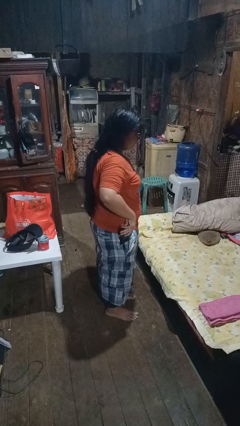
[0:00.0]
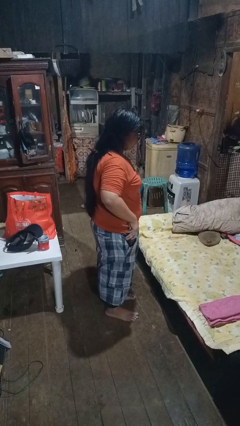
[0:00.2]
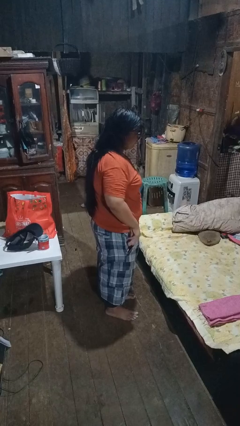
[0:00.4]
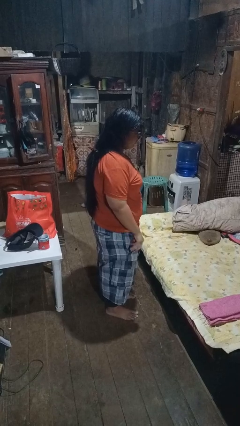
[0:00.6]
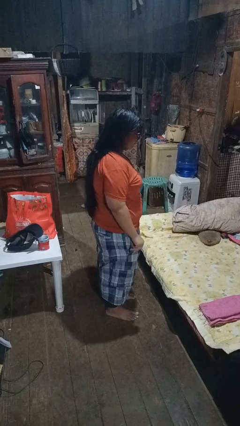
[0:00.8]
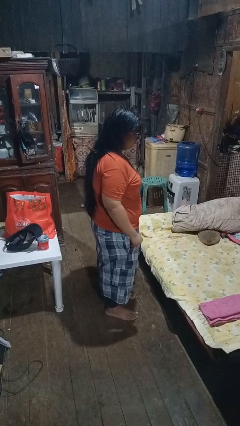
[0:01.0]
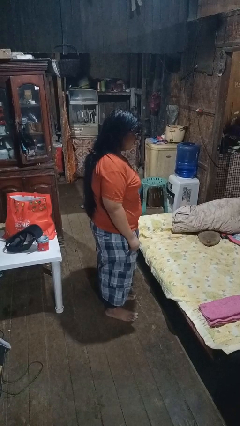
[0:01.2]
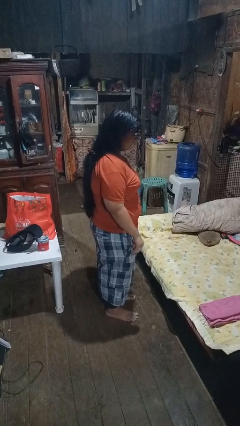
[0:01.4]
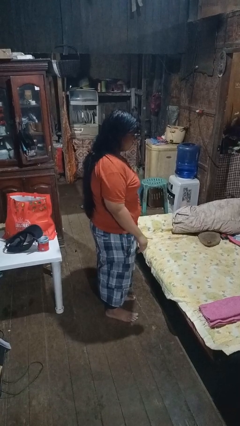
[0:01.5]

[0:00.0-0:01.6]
person puts phone into pocket

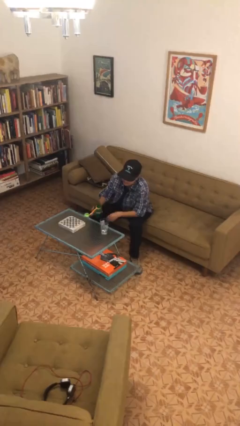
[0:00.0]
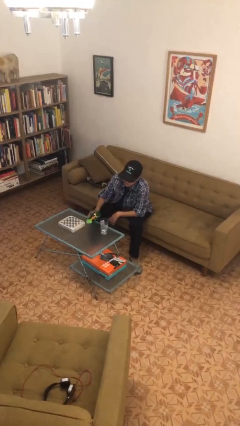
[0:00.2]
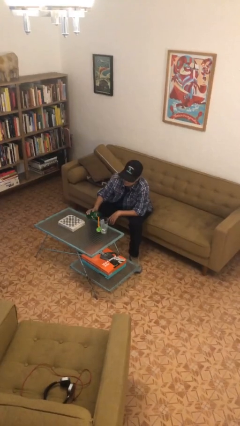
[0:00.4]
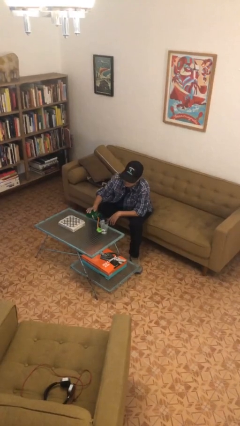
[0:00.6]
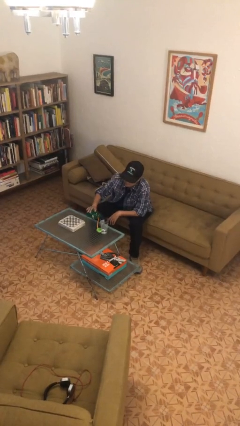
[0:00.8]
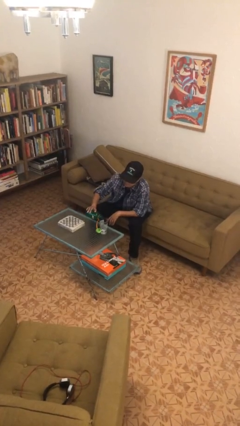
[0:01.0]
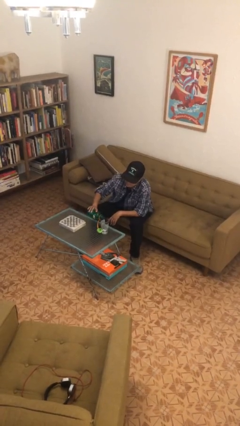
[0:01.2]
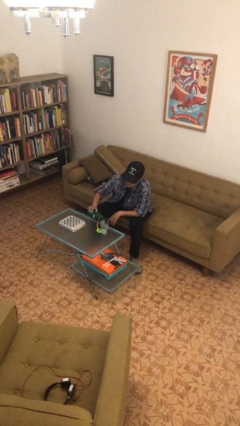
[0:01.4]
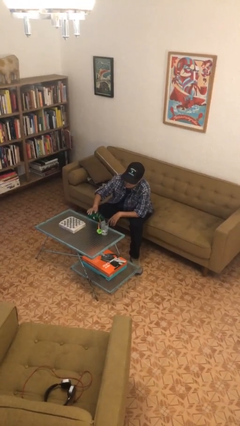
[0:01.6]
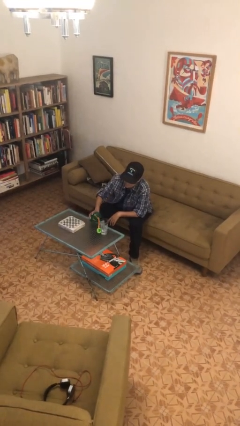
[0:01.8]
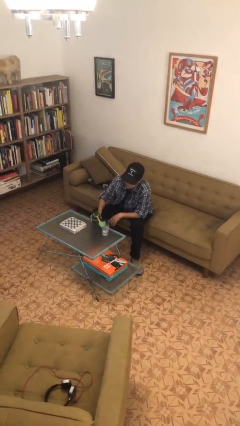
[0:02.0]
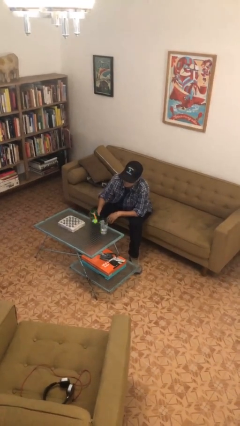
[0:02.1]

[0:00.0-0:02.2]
person pours liquid into cup

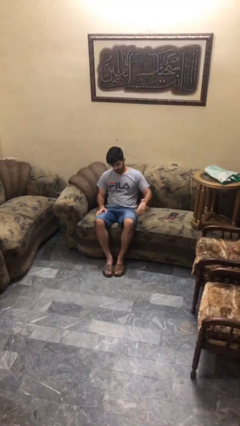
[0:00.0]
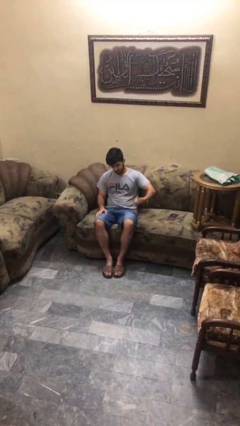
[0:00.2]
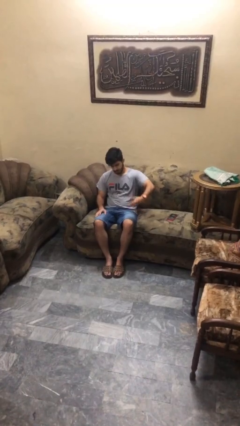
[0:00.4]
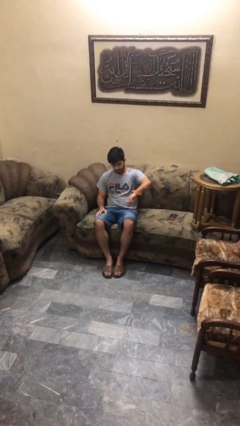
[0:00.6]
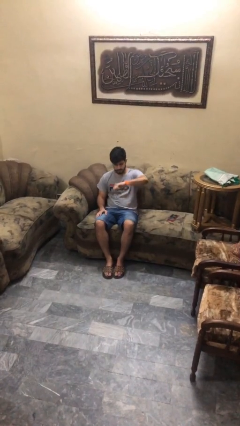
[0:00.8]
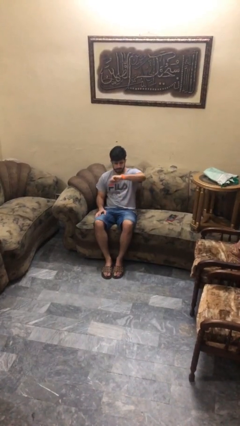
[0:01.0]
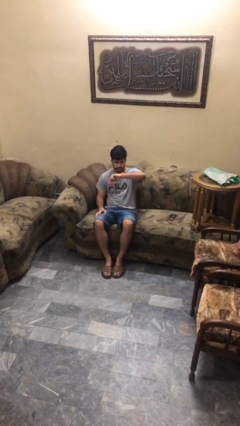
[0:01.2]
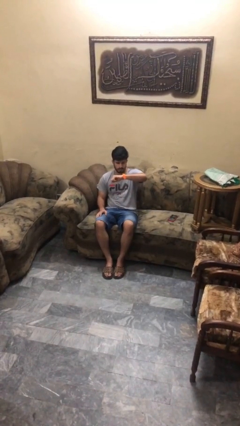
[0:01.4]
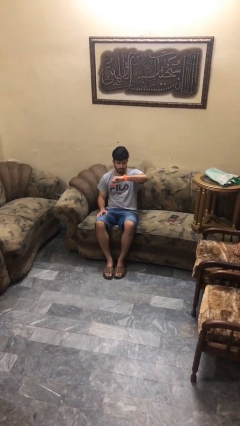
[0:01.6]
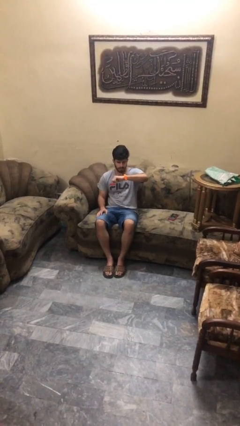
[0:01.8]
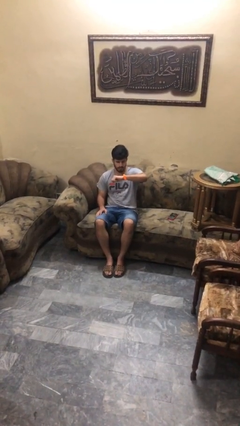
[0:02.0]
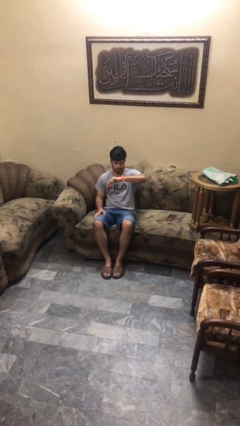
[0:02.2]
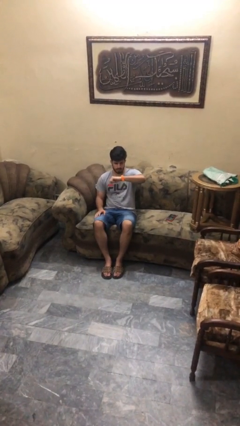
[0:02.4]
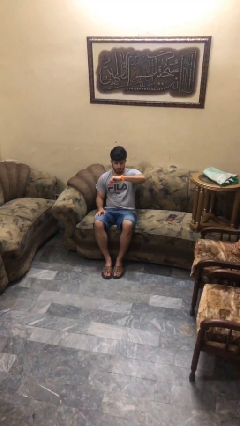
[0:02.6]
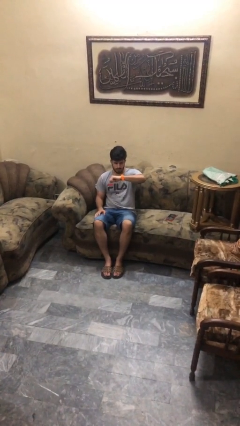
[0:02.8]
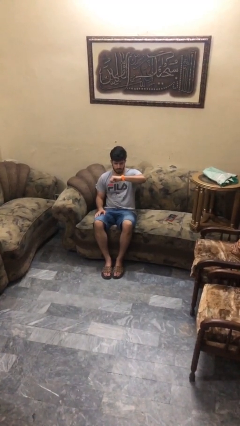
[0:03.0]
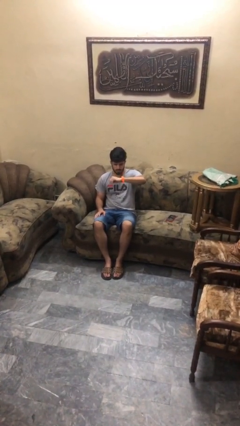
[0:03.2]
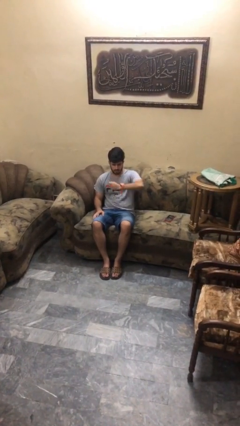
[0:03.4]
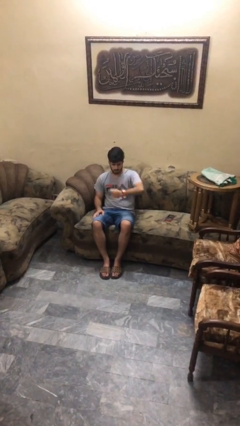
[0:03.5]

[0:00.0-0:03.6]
person looks at wristwatch

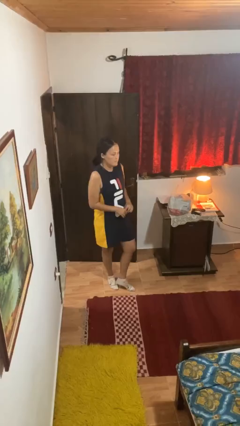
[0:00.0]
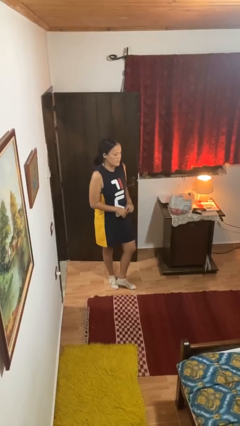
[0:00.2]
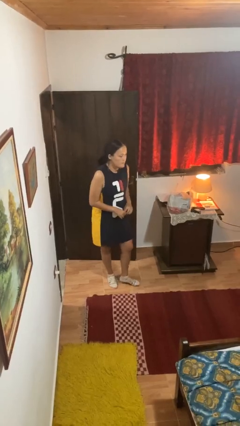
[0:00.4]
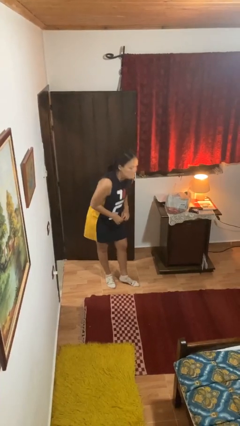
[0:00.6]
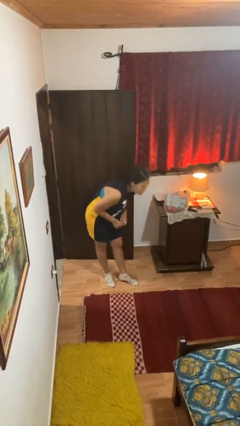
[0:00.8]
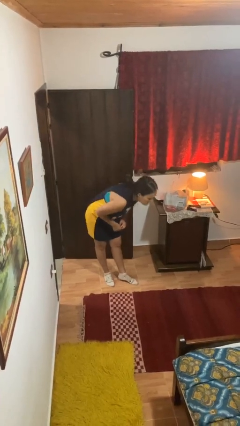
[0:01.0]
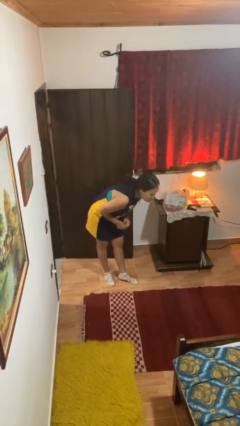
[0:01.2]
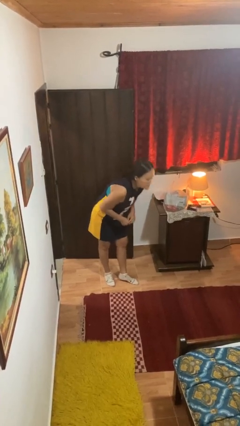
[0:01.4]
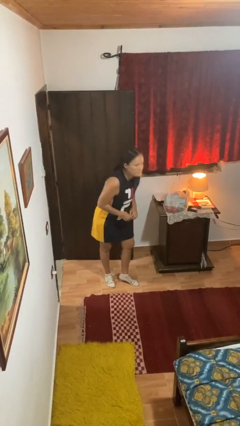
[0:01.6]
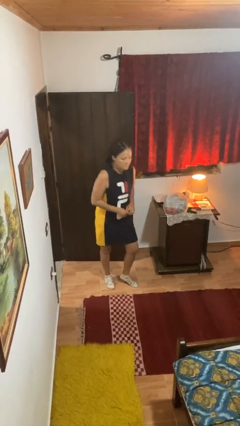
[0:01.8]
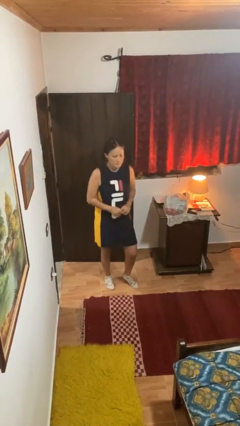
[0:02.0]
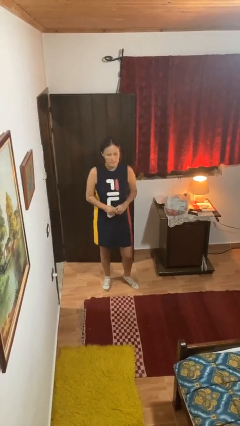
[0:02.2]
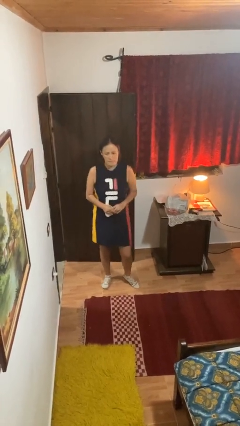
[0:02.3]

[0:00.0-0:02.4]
person bows

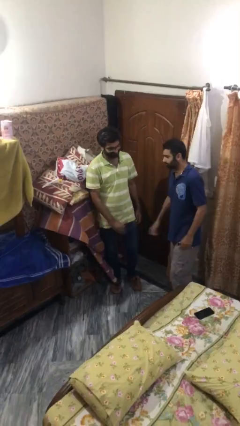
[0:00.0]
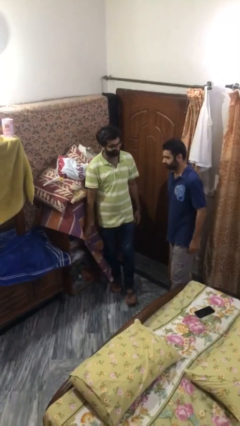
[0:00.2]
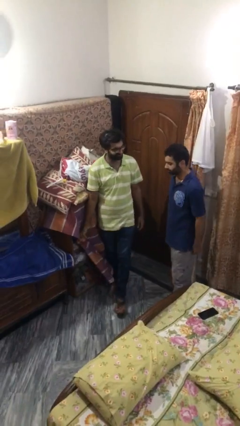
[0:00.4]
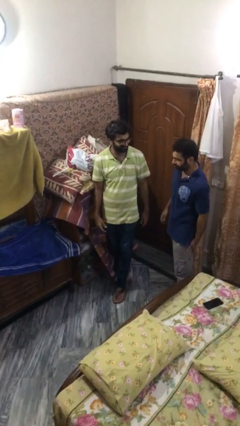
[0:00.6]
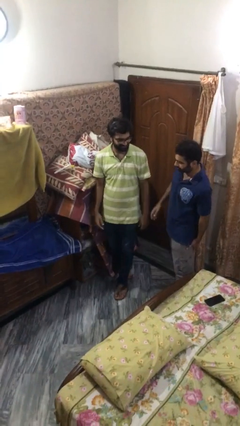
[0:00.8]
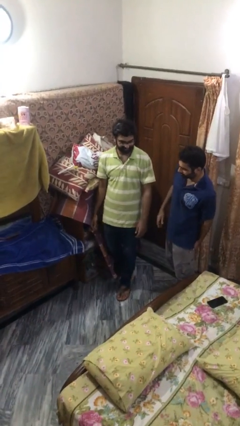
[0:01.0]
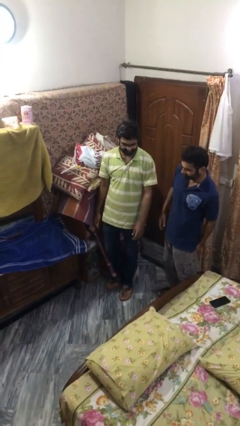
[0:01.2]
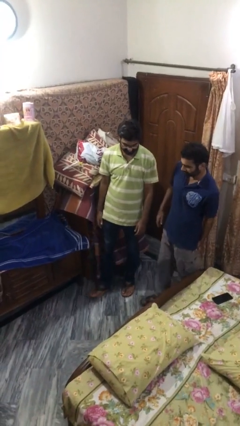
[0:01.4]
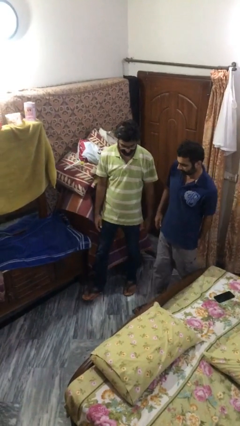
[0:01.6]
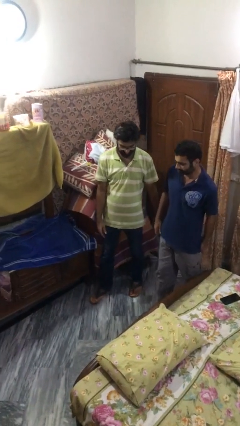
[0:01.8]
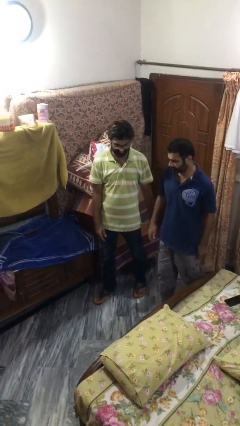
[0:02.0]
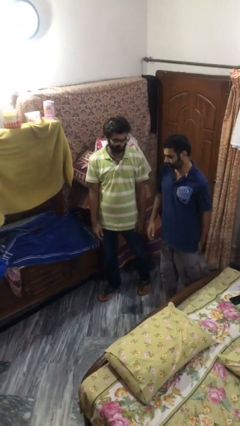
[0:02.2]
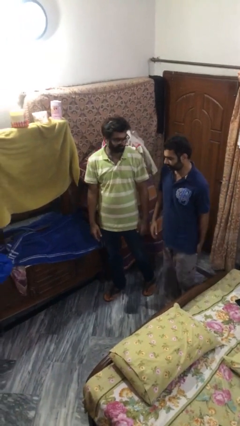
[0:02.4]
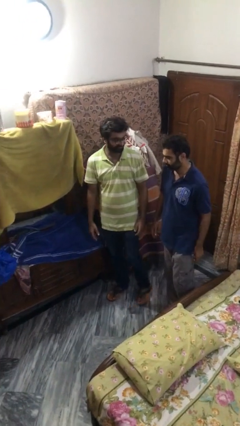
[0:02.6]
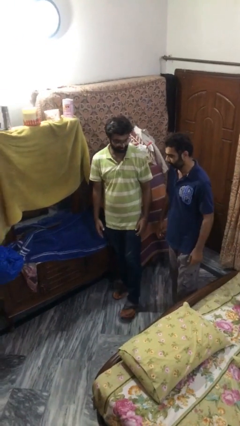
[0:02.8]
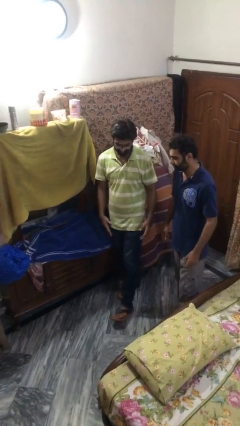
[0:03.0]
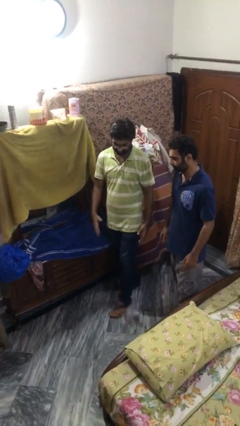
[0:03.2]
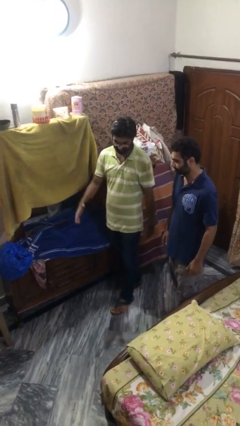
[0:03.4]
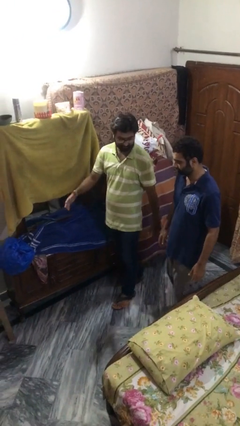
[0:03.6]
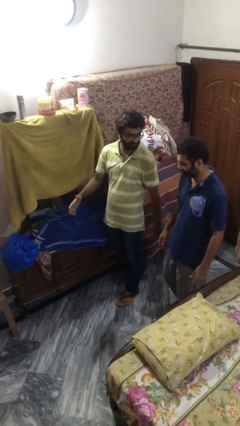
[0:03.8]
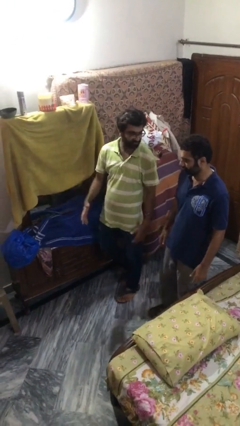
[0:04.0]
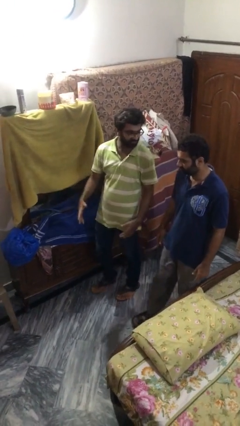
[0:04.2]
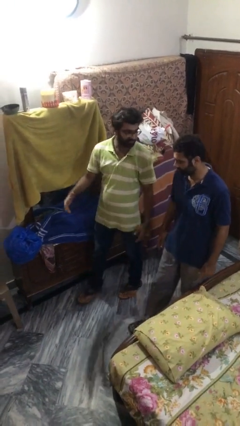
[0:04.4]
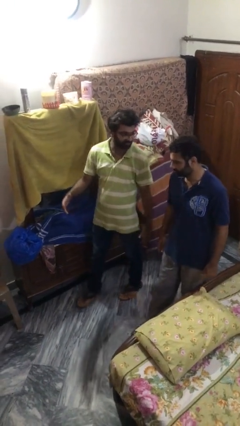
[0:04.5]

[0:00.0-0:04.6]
person talks to person

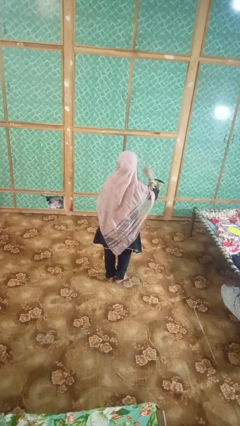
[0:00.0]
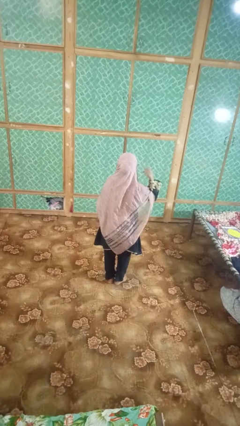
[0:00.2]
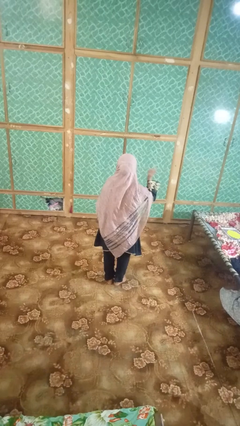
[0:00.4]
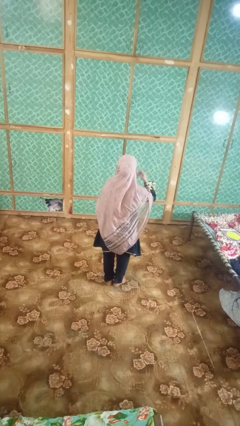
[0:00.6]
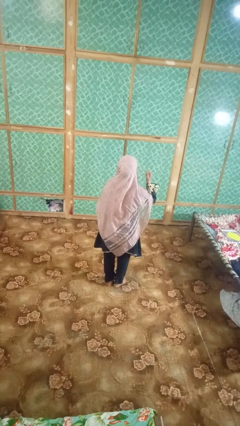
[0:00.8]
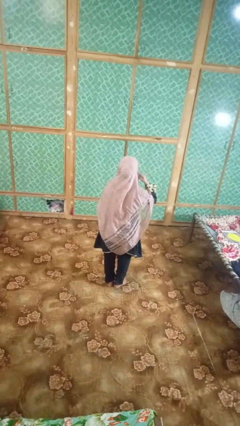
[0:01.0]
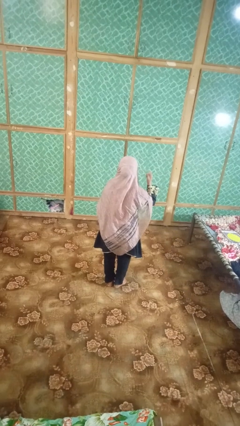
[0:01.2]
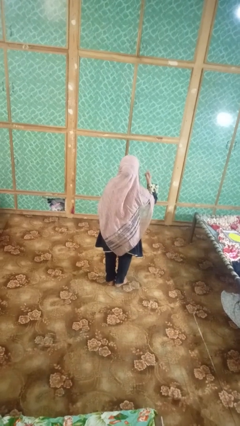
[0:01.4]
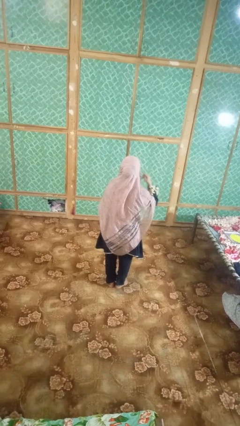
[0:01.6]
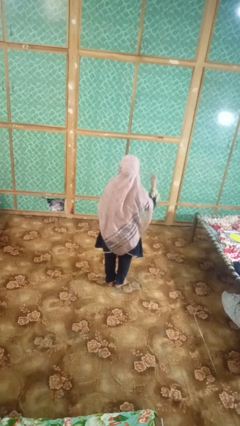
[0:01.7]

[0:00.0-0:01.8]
person gestures listen closely

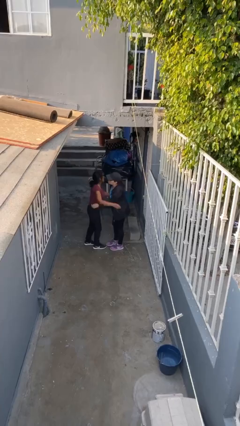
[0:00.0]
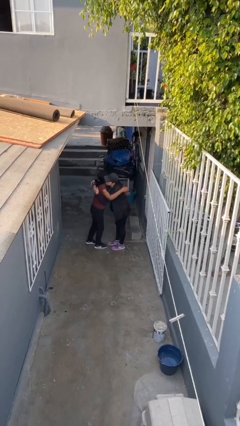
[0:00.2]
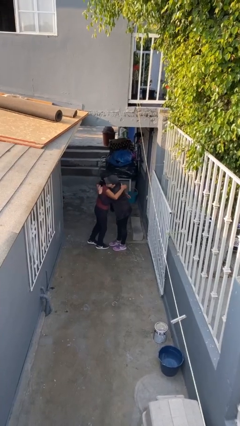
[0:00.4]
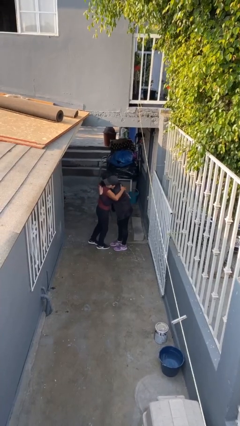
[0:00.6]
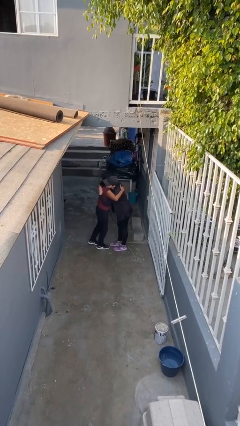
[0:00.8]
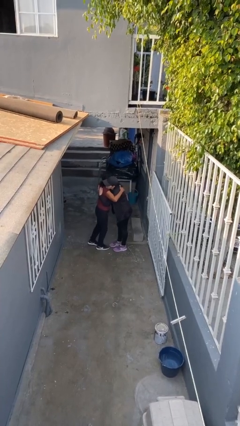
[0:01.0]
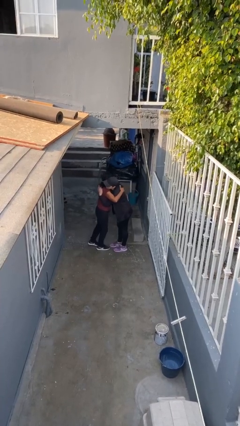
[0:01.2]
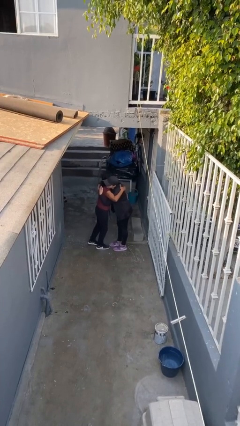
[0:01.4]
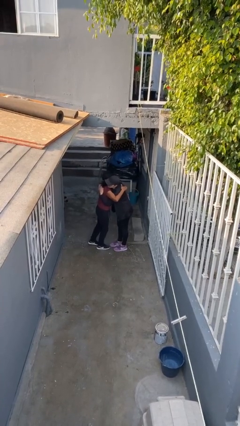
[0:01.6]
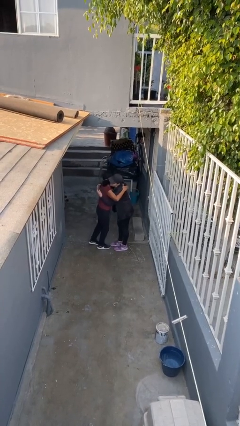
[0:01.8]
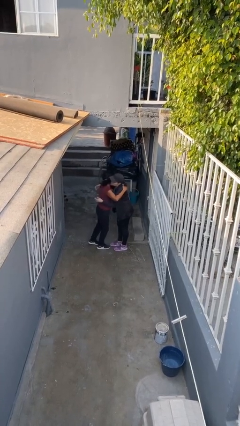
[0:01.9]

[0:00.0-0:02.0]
person embraces person
